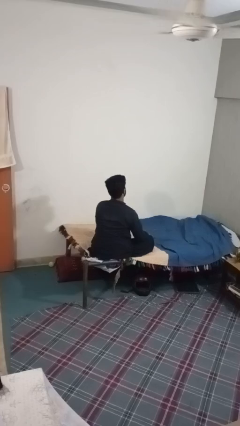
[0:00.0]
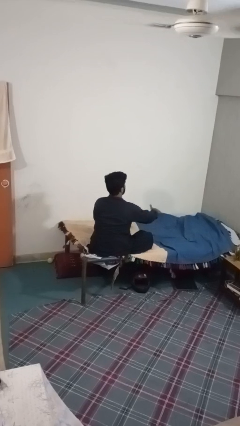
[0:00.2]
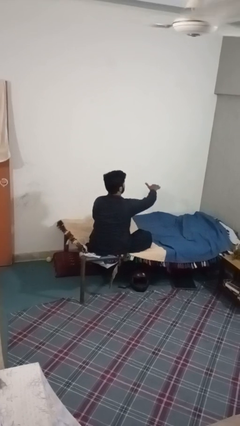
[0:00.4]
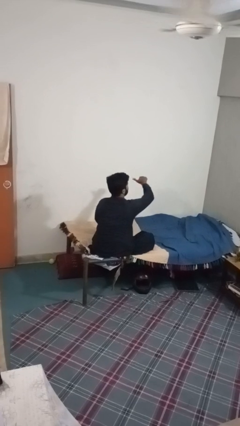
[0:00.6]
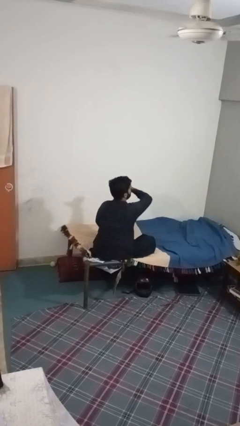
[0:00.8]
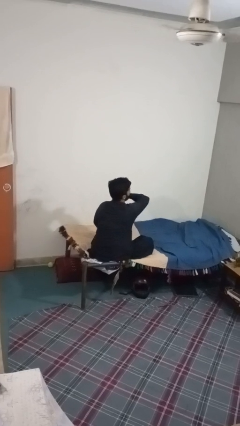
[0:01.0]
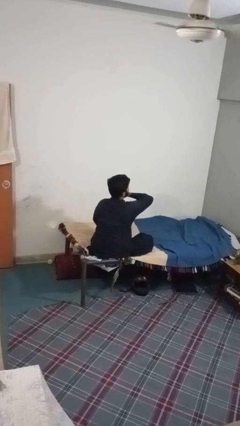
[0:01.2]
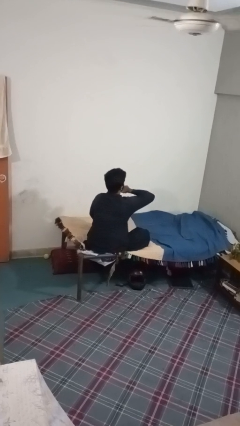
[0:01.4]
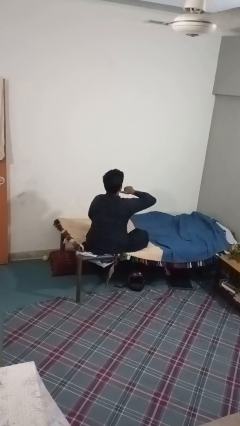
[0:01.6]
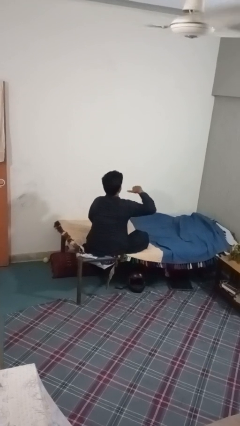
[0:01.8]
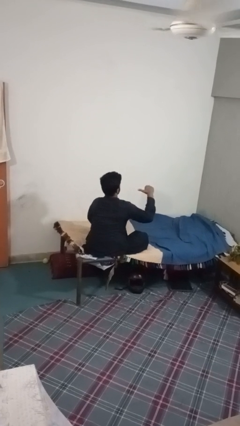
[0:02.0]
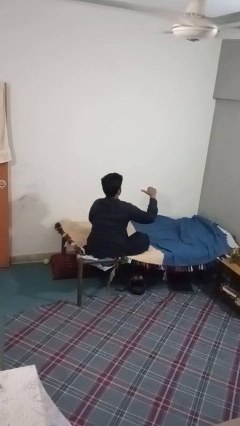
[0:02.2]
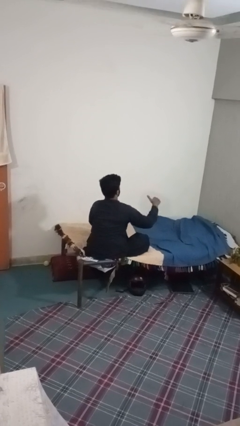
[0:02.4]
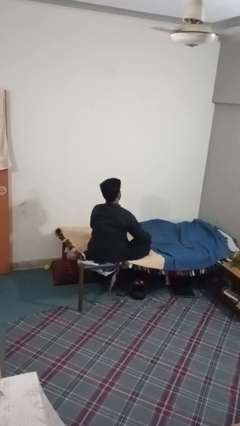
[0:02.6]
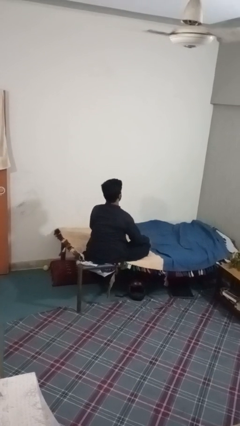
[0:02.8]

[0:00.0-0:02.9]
person gestures cut

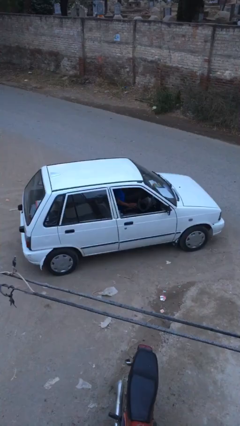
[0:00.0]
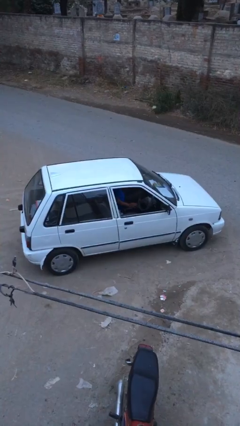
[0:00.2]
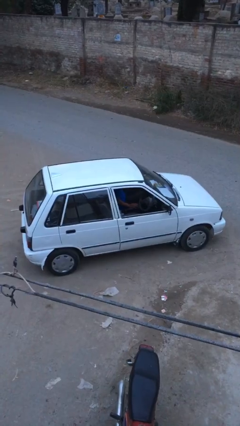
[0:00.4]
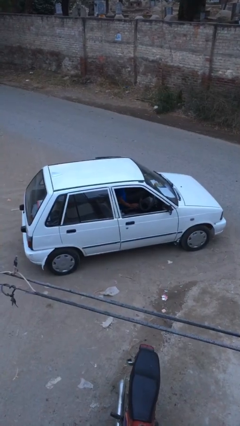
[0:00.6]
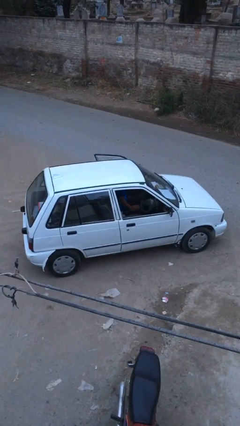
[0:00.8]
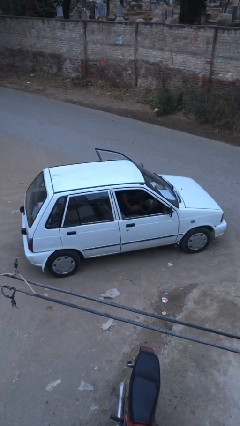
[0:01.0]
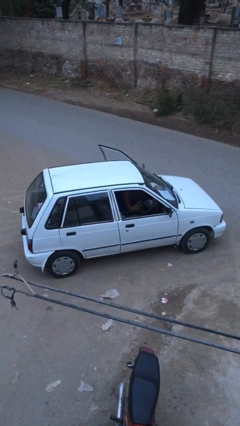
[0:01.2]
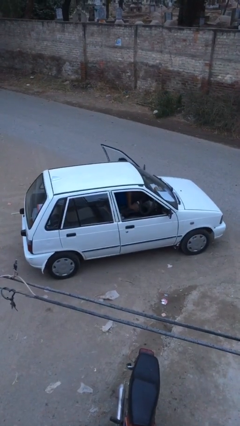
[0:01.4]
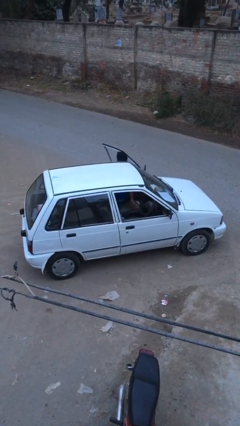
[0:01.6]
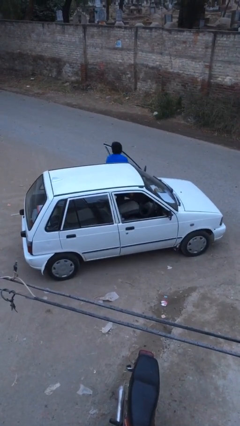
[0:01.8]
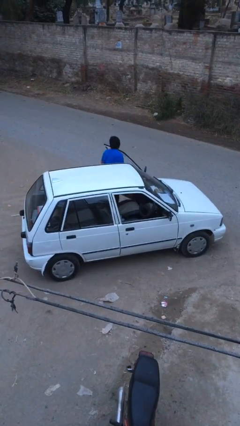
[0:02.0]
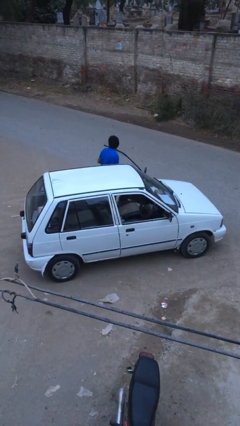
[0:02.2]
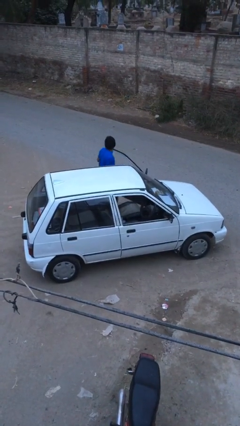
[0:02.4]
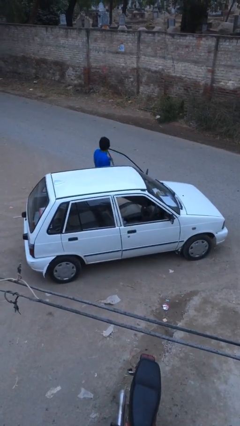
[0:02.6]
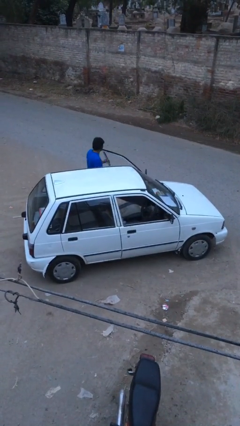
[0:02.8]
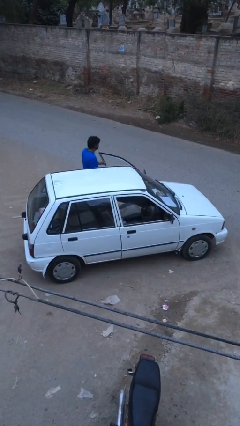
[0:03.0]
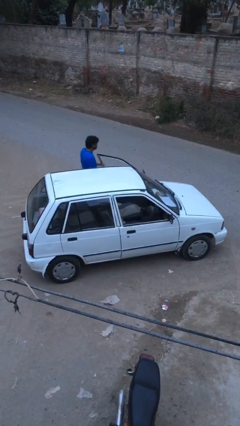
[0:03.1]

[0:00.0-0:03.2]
car drops off person

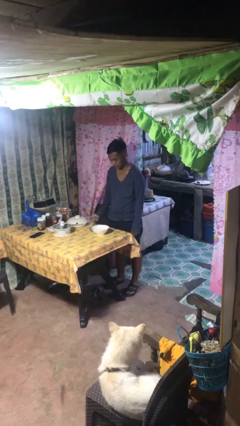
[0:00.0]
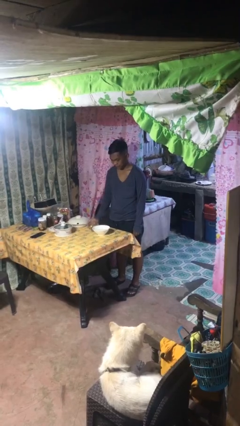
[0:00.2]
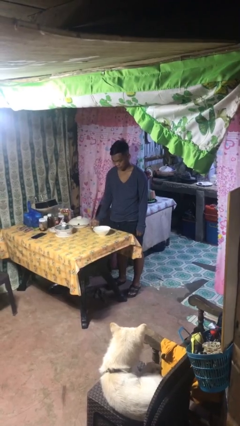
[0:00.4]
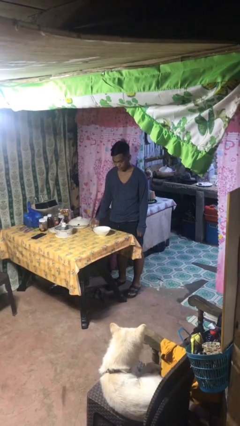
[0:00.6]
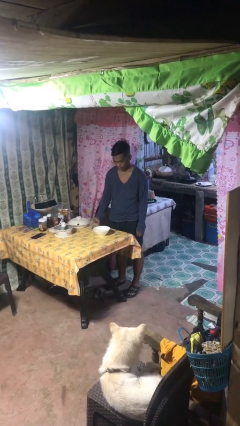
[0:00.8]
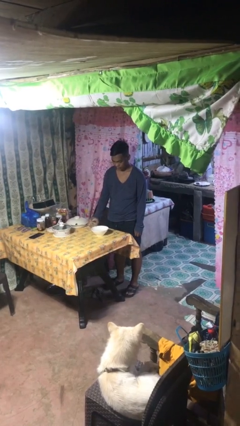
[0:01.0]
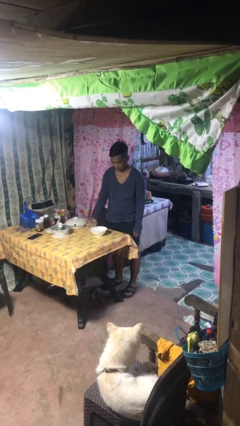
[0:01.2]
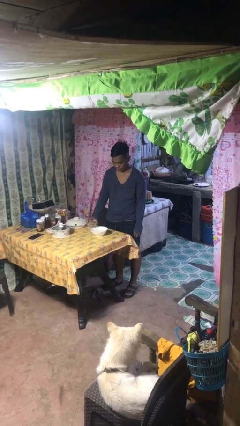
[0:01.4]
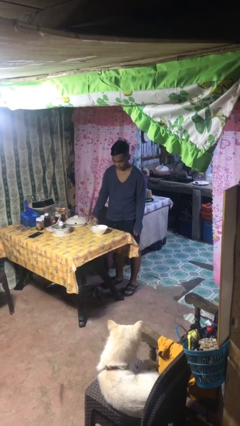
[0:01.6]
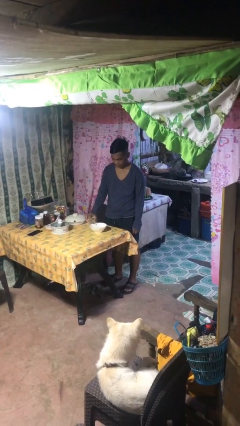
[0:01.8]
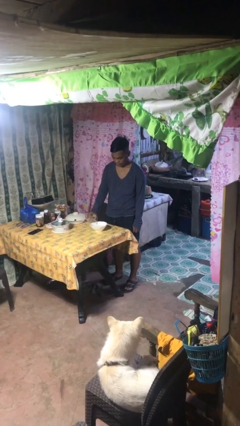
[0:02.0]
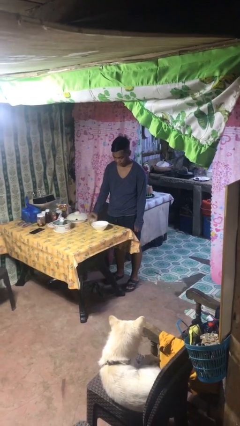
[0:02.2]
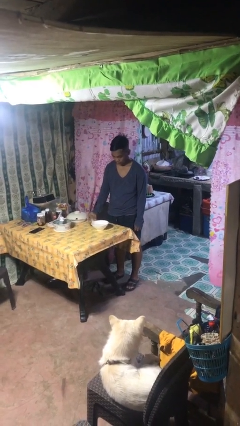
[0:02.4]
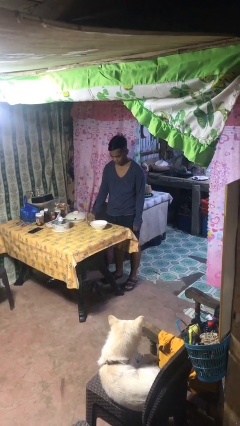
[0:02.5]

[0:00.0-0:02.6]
person pours into bowl

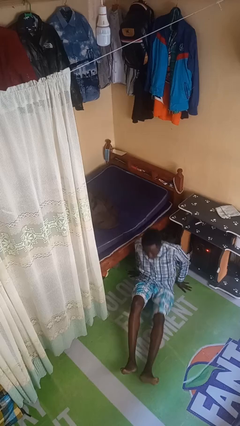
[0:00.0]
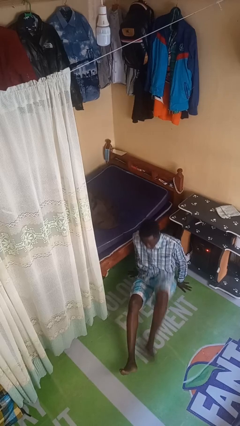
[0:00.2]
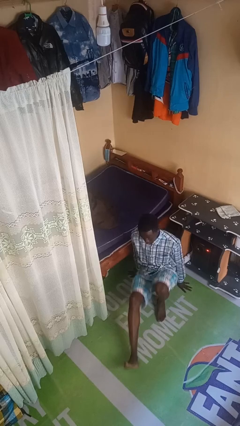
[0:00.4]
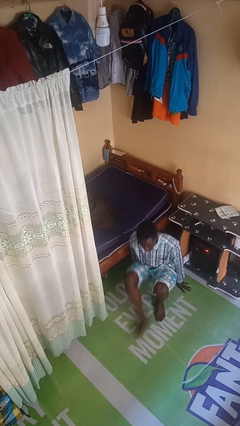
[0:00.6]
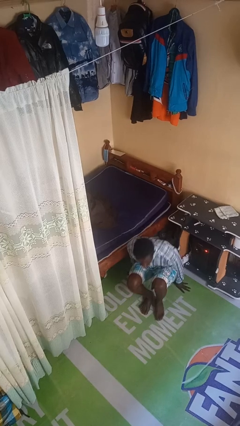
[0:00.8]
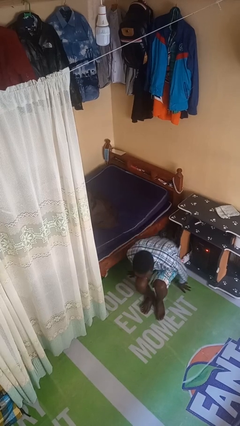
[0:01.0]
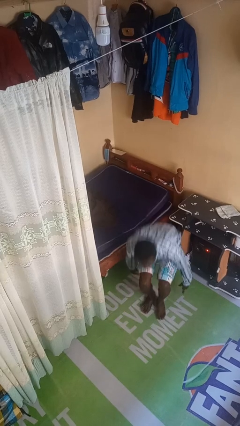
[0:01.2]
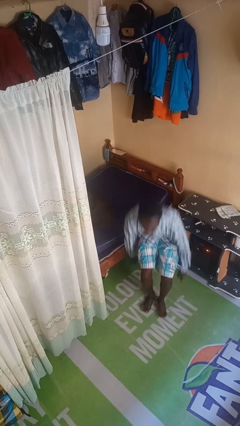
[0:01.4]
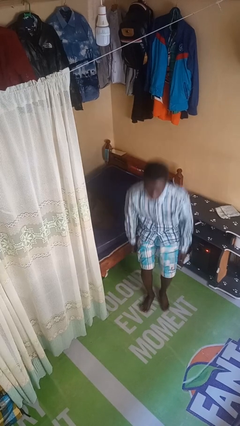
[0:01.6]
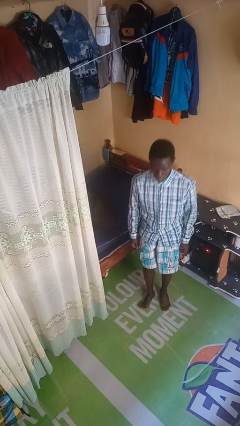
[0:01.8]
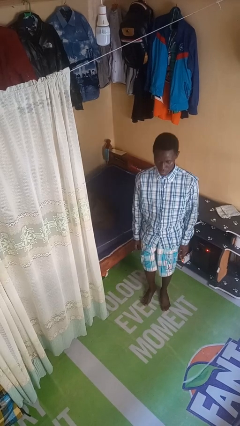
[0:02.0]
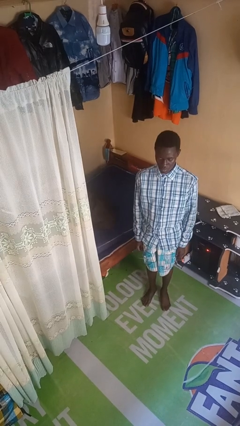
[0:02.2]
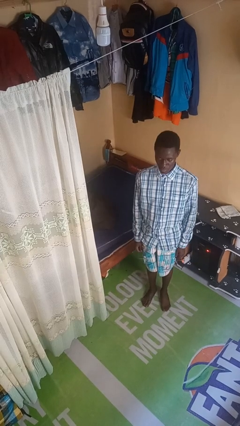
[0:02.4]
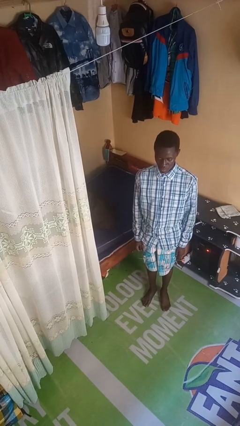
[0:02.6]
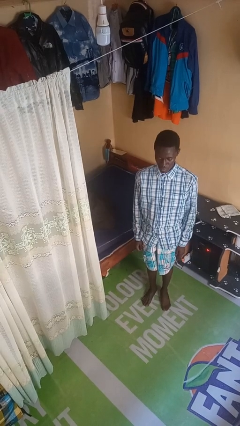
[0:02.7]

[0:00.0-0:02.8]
person stands up from floor

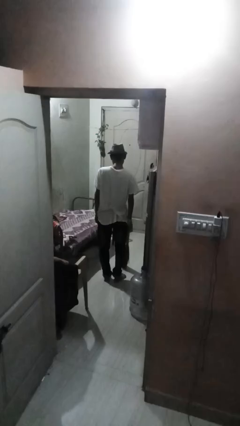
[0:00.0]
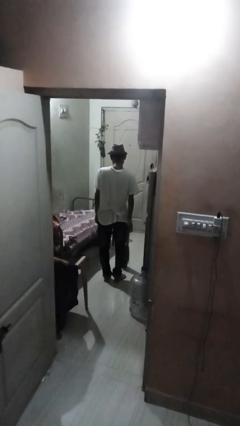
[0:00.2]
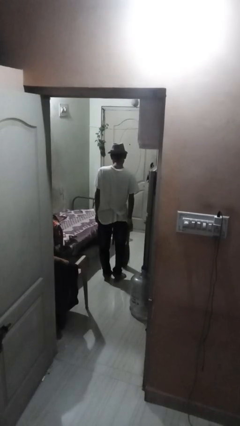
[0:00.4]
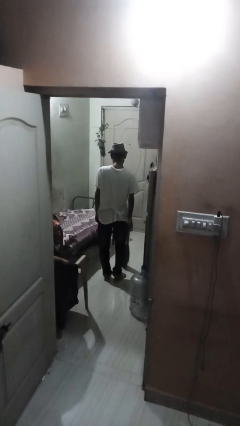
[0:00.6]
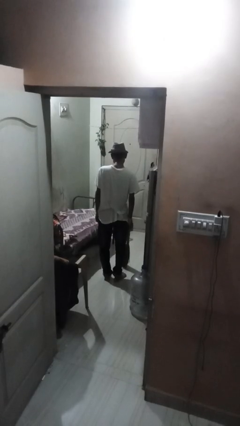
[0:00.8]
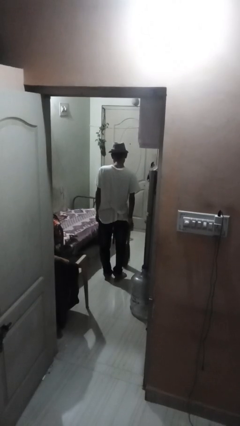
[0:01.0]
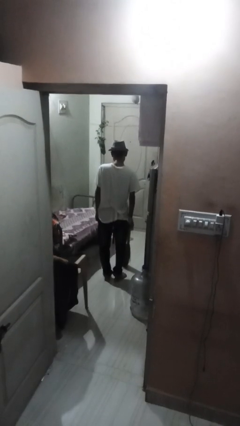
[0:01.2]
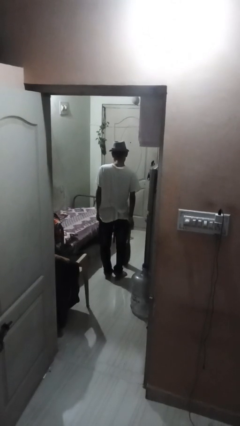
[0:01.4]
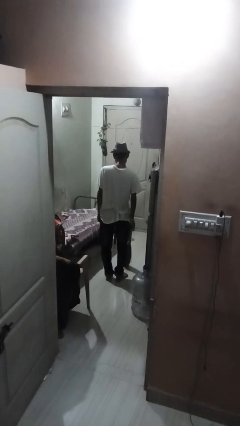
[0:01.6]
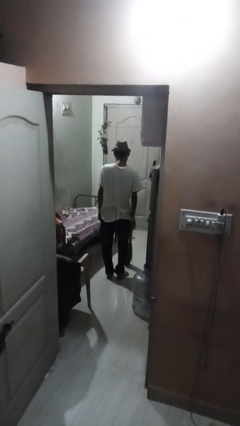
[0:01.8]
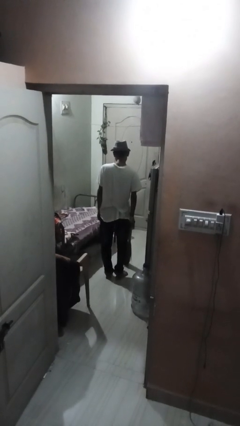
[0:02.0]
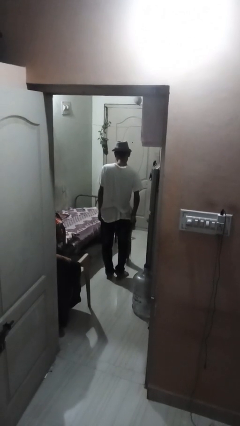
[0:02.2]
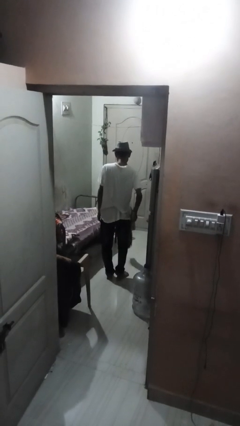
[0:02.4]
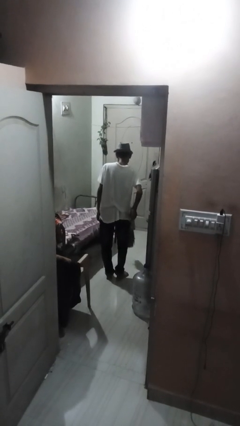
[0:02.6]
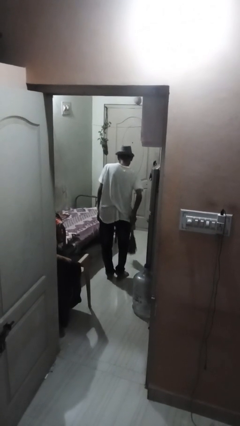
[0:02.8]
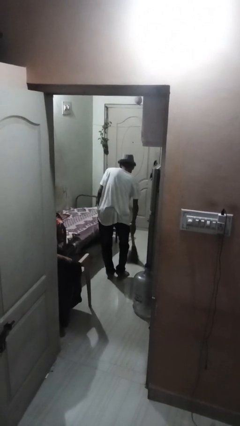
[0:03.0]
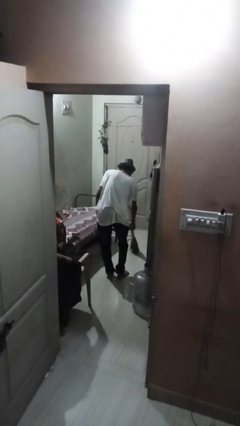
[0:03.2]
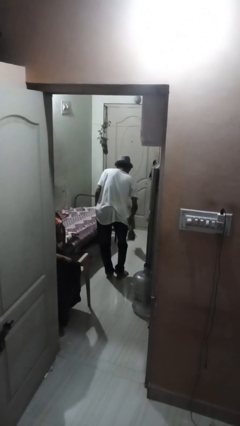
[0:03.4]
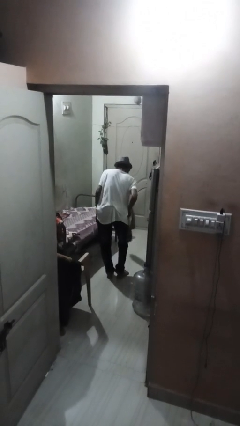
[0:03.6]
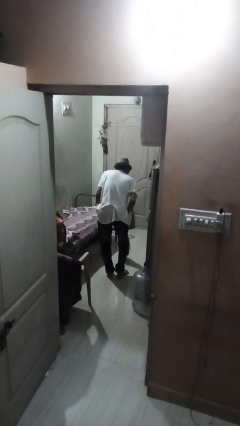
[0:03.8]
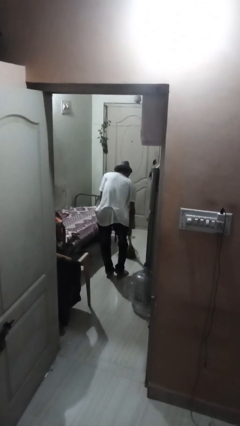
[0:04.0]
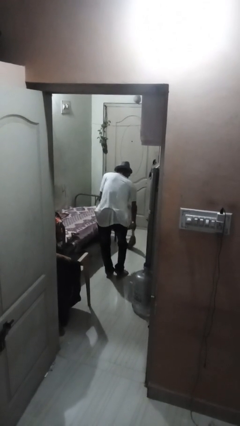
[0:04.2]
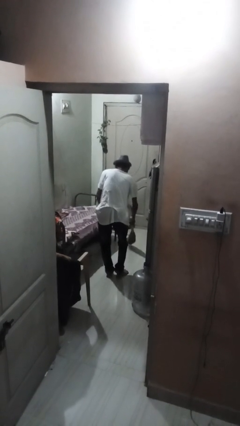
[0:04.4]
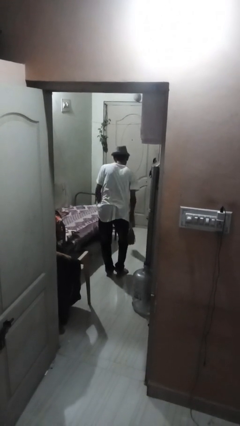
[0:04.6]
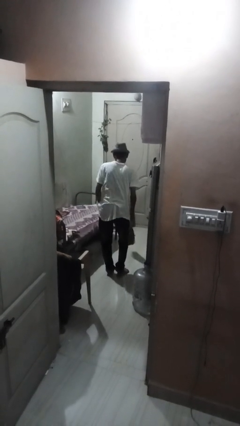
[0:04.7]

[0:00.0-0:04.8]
person mops

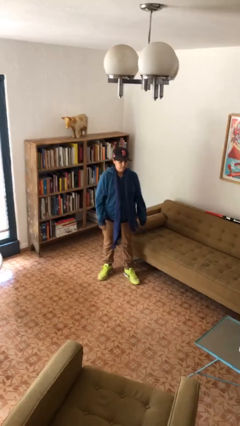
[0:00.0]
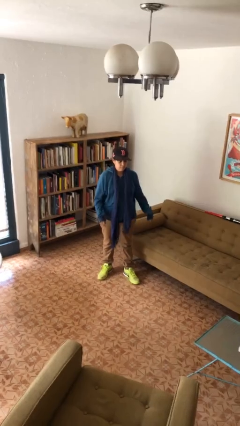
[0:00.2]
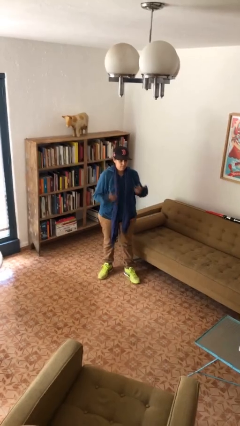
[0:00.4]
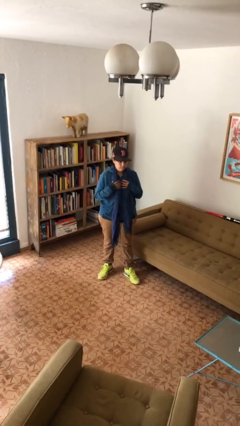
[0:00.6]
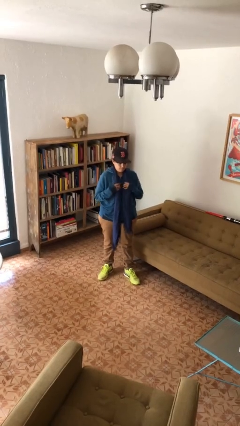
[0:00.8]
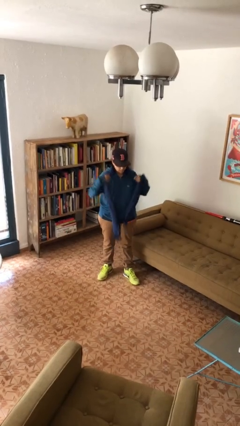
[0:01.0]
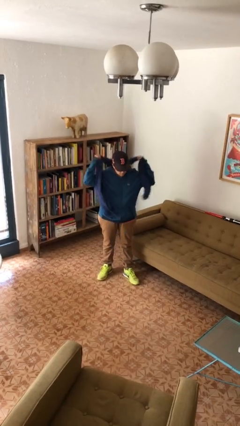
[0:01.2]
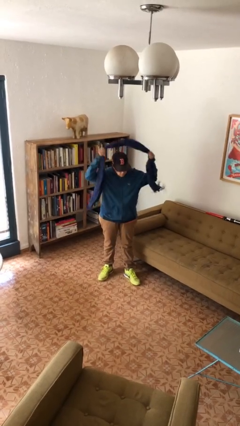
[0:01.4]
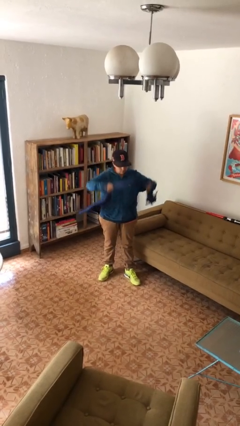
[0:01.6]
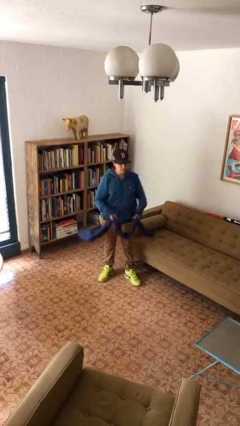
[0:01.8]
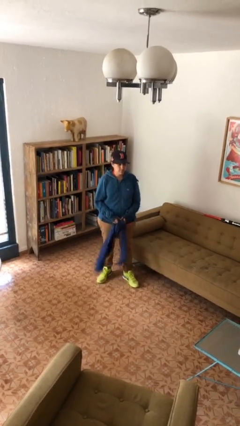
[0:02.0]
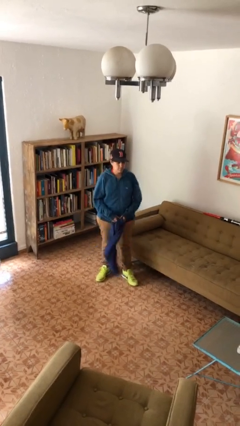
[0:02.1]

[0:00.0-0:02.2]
person takes off scarf
